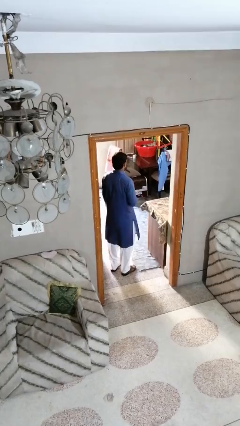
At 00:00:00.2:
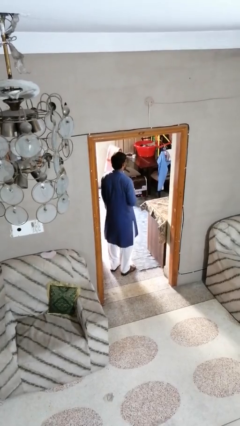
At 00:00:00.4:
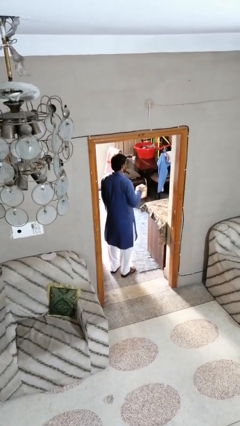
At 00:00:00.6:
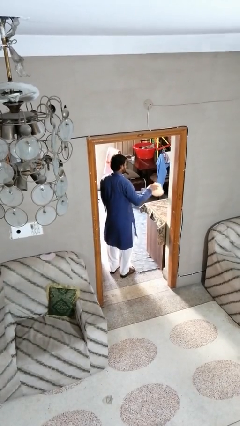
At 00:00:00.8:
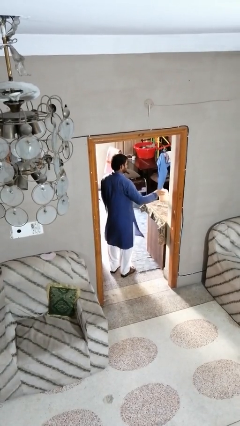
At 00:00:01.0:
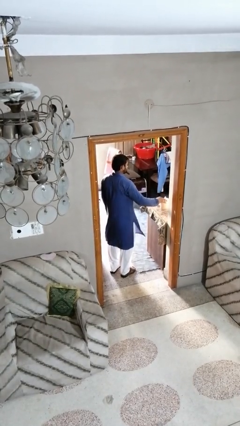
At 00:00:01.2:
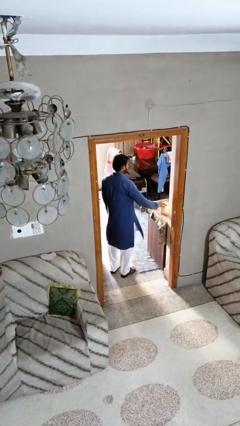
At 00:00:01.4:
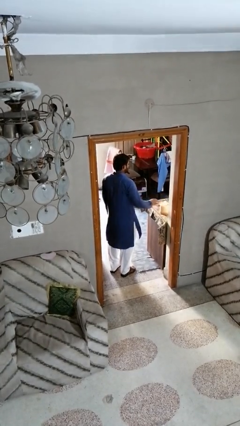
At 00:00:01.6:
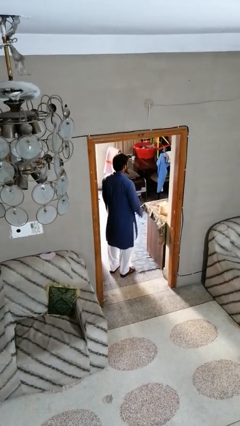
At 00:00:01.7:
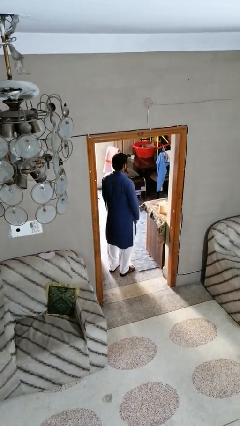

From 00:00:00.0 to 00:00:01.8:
person puts down object on countertop

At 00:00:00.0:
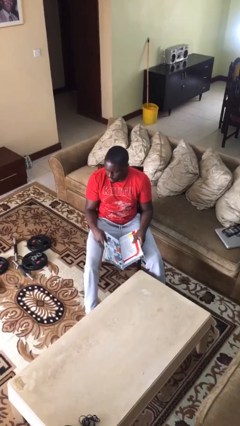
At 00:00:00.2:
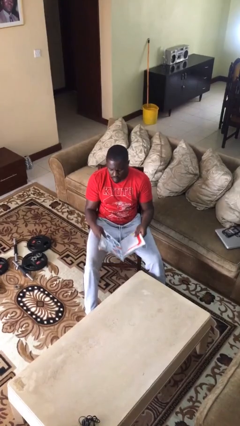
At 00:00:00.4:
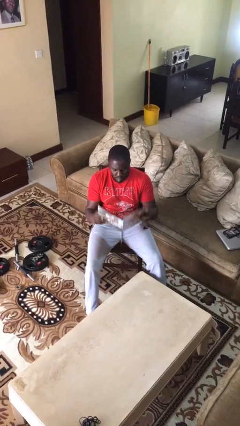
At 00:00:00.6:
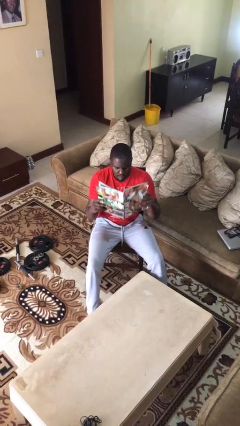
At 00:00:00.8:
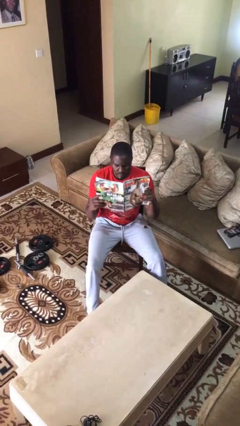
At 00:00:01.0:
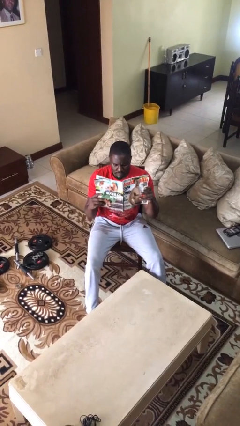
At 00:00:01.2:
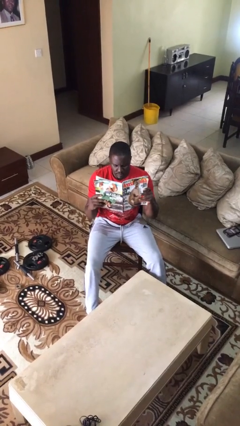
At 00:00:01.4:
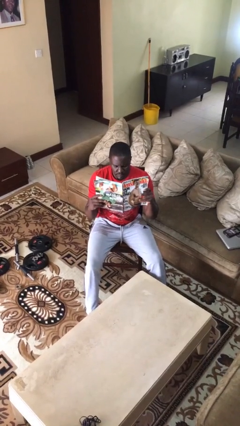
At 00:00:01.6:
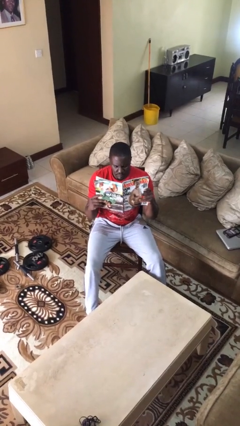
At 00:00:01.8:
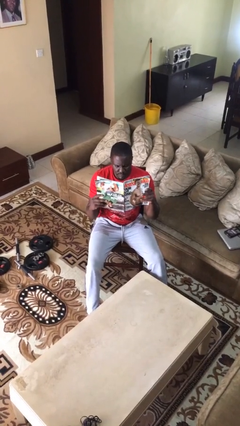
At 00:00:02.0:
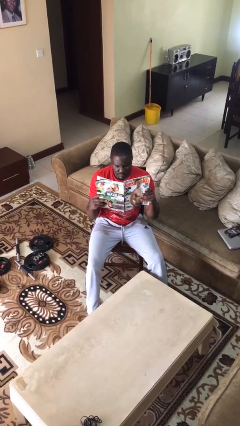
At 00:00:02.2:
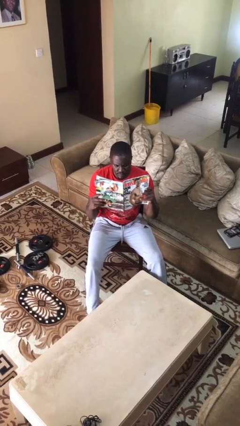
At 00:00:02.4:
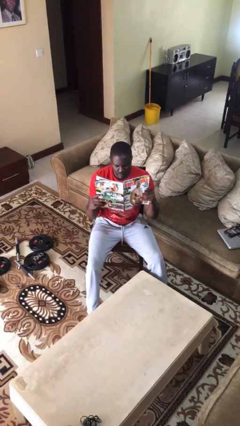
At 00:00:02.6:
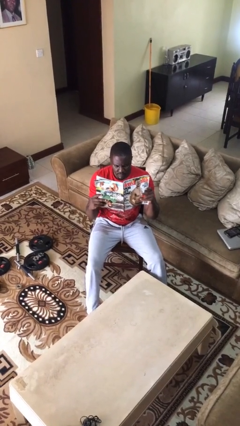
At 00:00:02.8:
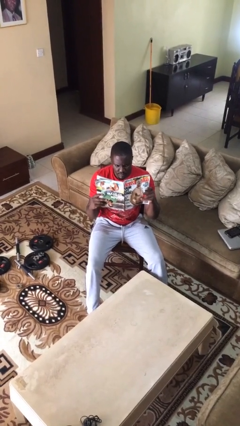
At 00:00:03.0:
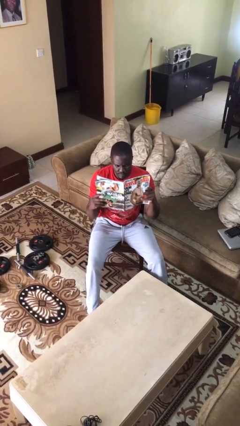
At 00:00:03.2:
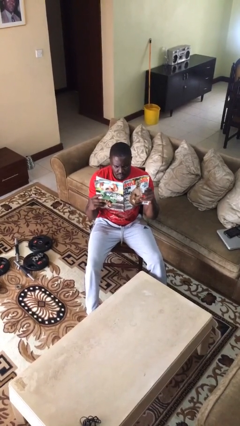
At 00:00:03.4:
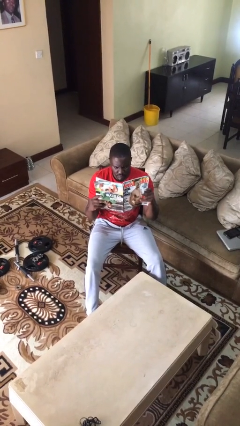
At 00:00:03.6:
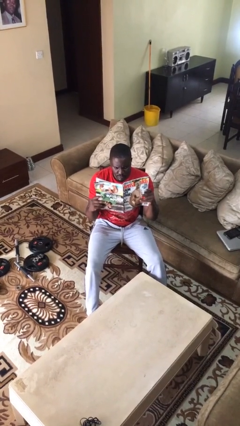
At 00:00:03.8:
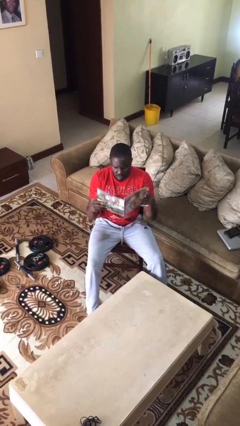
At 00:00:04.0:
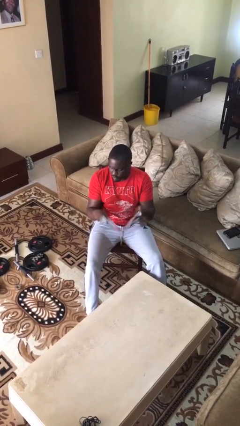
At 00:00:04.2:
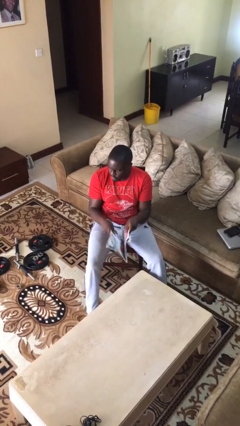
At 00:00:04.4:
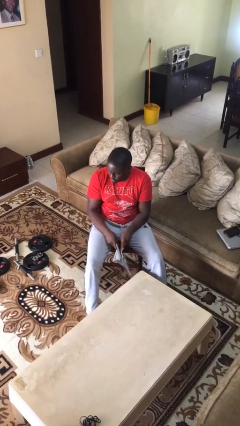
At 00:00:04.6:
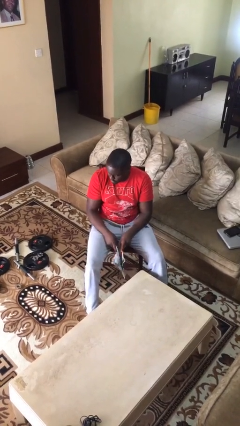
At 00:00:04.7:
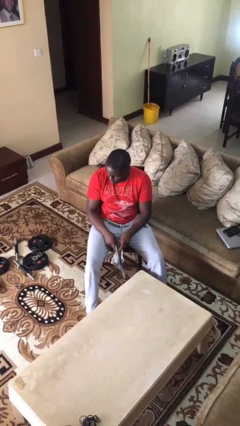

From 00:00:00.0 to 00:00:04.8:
person reads document

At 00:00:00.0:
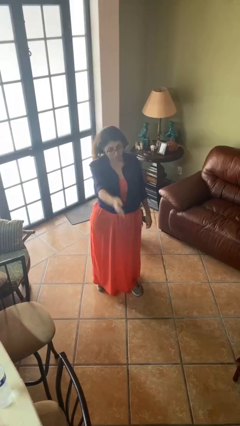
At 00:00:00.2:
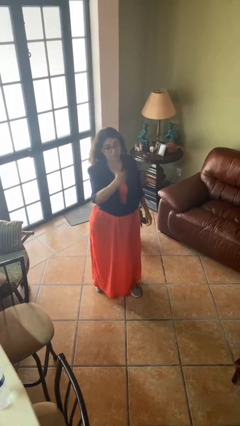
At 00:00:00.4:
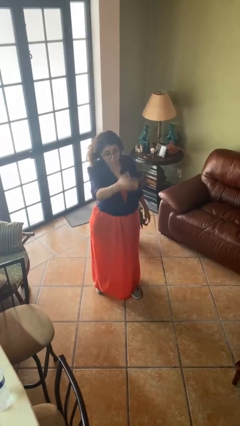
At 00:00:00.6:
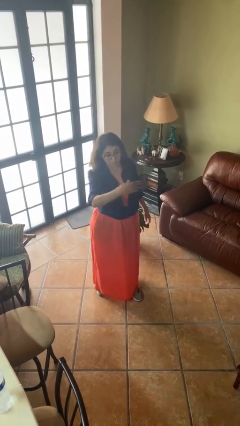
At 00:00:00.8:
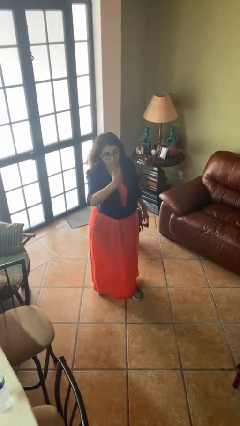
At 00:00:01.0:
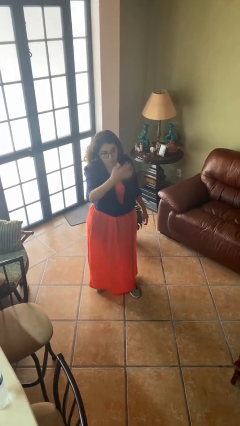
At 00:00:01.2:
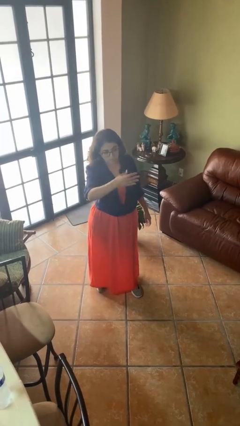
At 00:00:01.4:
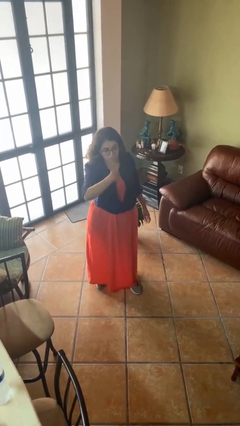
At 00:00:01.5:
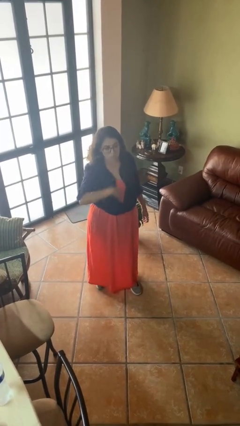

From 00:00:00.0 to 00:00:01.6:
person gestures come here

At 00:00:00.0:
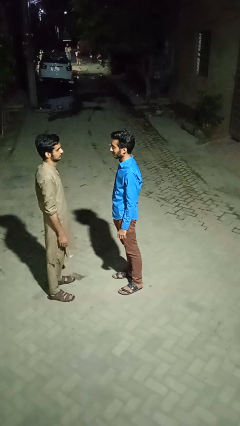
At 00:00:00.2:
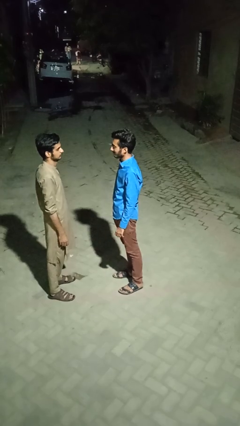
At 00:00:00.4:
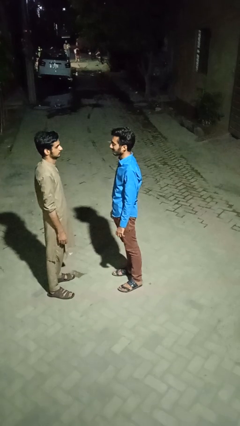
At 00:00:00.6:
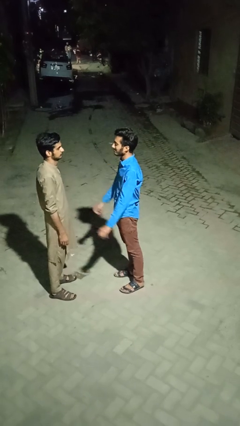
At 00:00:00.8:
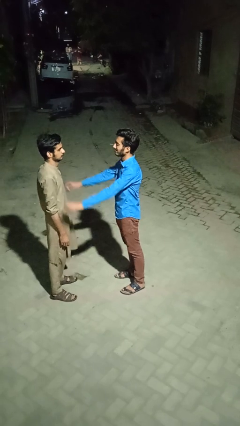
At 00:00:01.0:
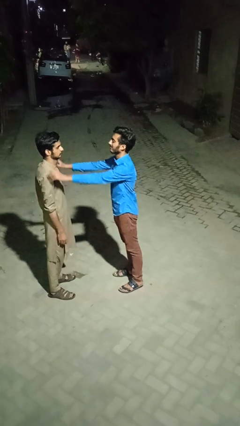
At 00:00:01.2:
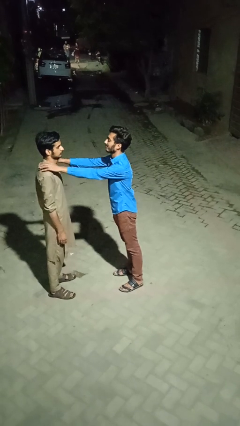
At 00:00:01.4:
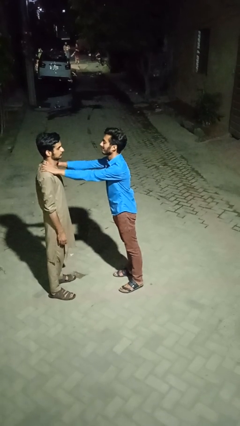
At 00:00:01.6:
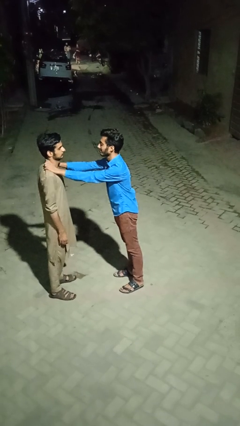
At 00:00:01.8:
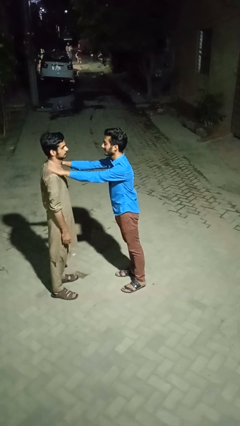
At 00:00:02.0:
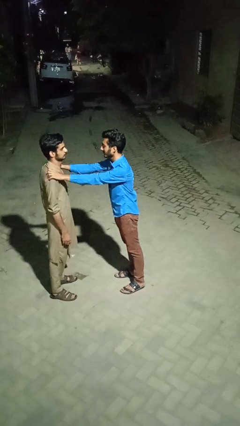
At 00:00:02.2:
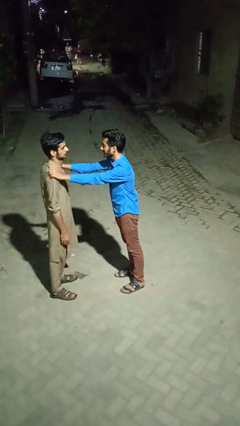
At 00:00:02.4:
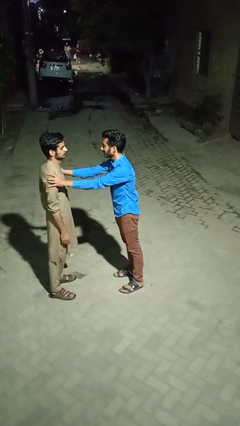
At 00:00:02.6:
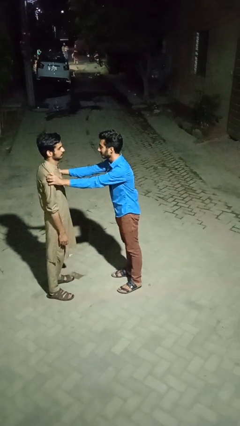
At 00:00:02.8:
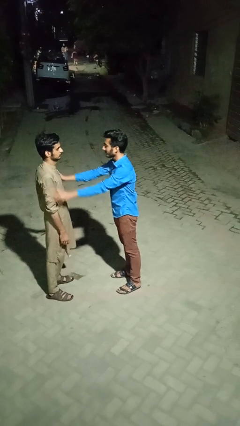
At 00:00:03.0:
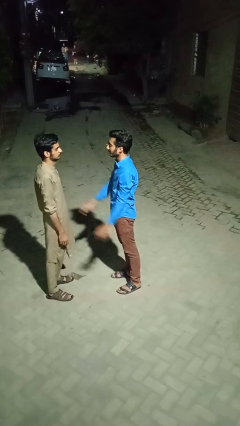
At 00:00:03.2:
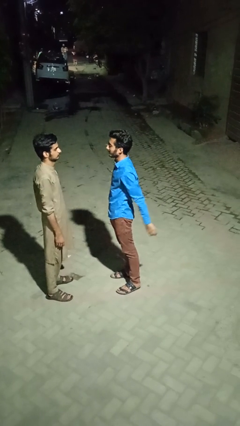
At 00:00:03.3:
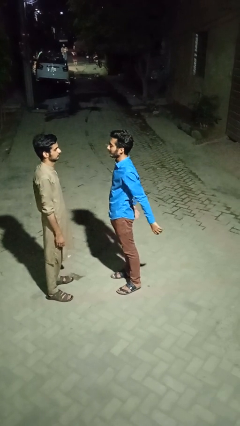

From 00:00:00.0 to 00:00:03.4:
person pounds shoulders of person

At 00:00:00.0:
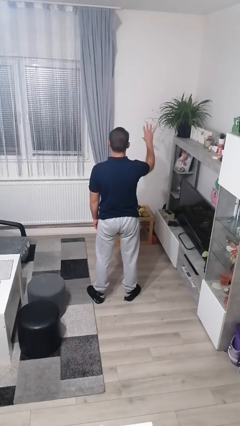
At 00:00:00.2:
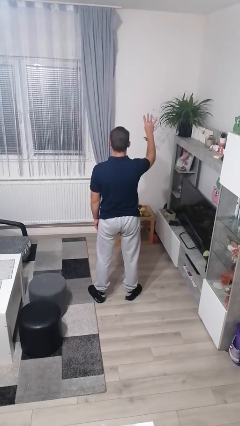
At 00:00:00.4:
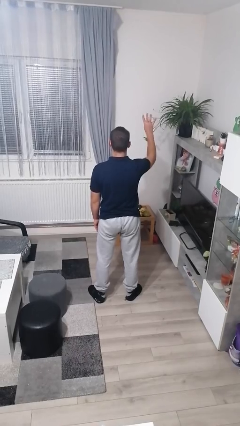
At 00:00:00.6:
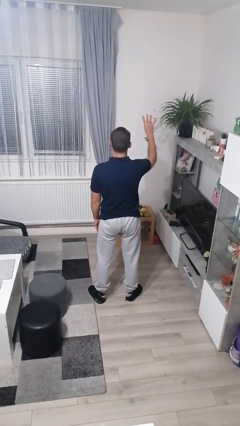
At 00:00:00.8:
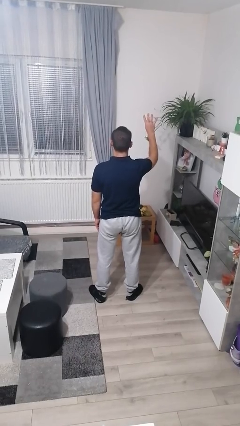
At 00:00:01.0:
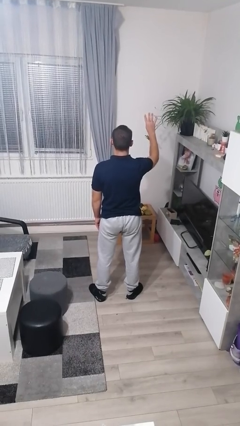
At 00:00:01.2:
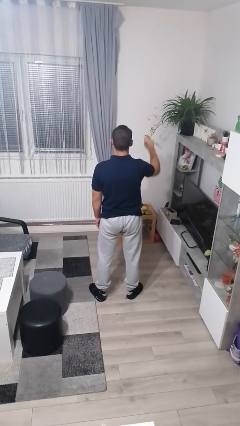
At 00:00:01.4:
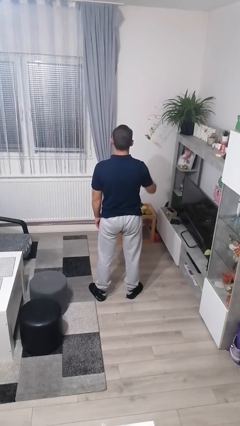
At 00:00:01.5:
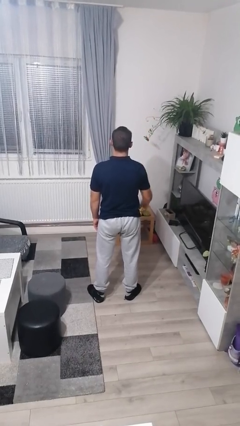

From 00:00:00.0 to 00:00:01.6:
person gestures number four

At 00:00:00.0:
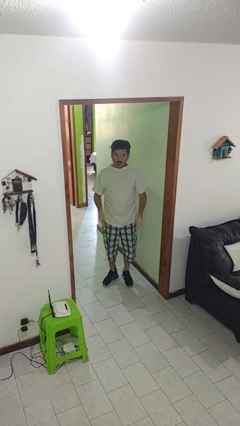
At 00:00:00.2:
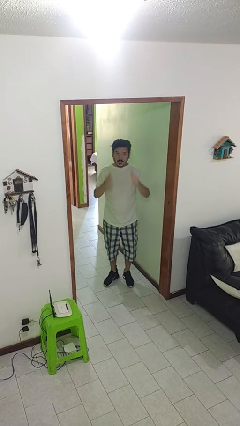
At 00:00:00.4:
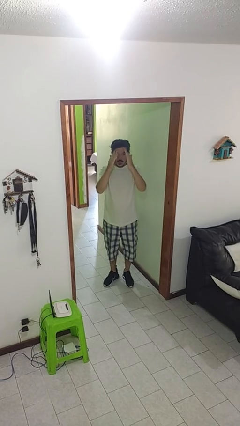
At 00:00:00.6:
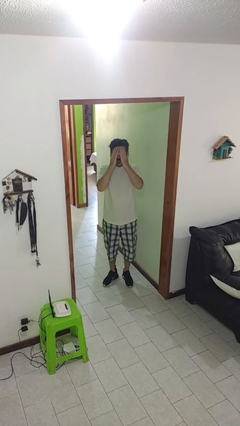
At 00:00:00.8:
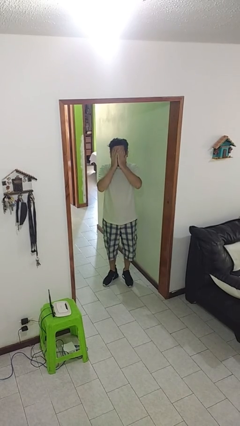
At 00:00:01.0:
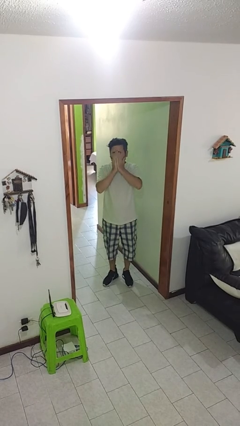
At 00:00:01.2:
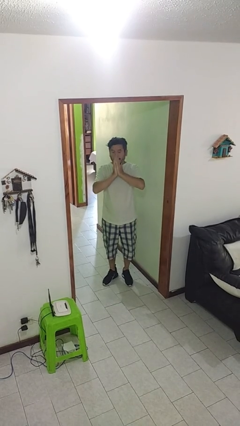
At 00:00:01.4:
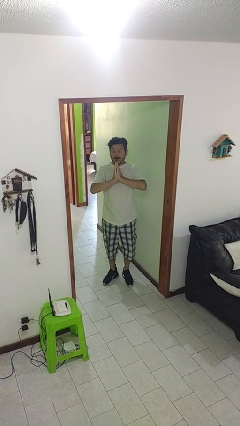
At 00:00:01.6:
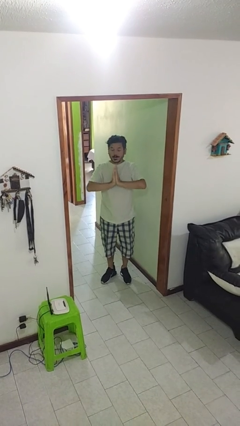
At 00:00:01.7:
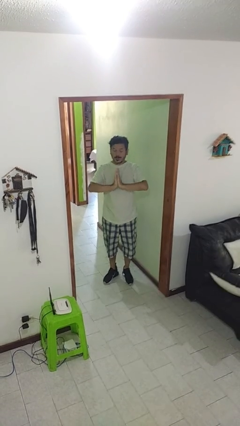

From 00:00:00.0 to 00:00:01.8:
person covers face with hands

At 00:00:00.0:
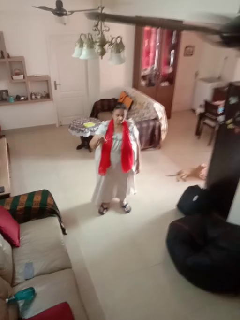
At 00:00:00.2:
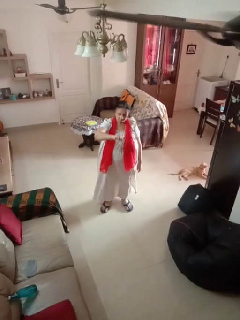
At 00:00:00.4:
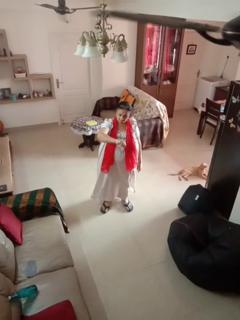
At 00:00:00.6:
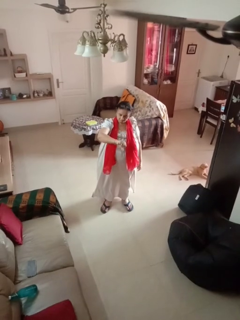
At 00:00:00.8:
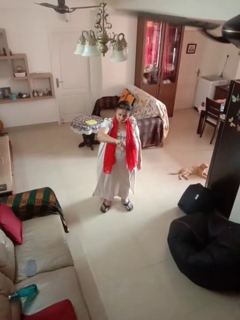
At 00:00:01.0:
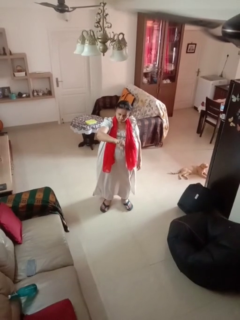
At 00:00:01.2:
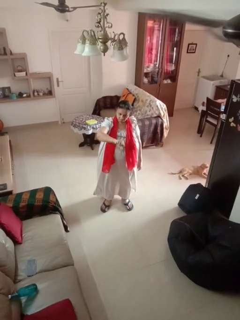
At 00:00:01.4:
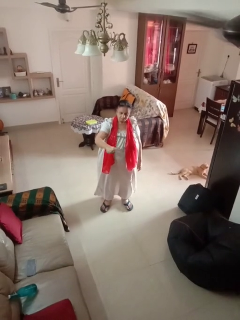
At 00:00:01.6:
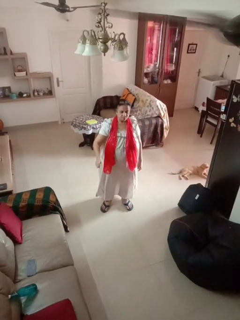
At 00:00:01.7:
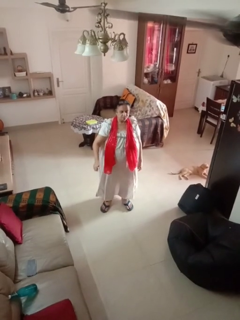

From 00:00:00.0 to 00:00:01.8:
person gestures thumbs down
